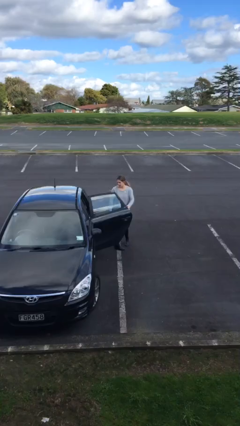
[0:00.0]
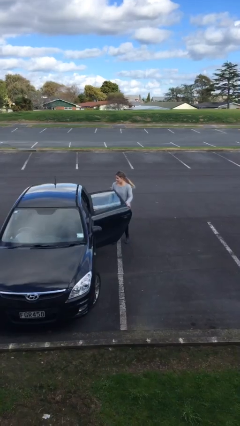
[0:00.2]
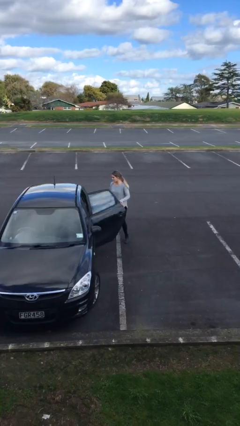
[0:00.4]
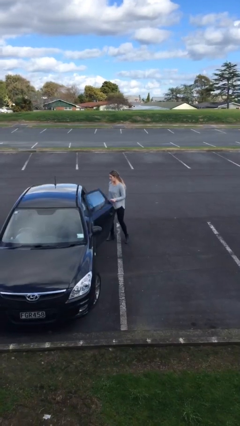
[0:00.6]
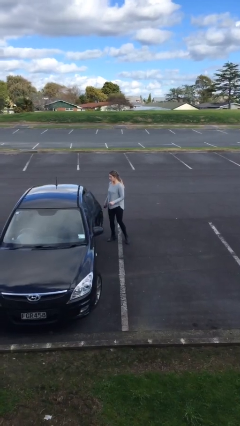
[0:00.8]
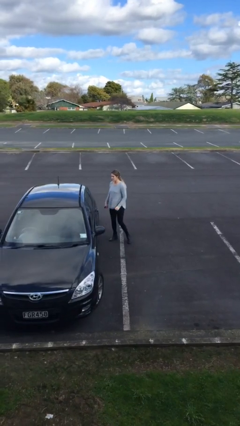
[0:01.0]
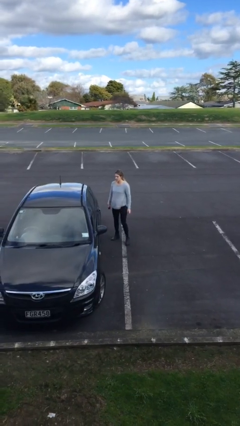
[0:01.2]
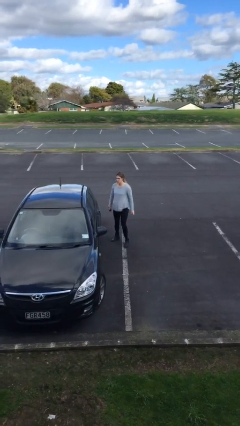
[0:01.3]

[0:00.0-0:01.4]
person closes car door

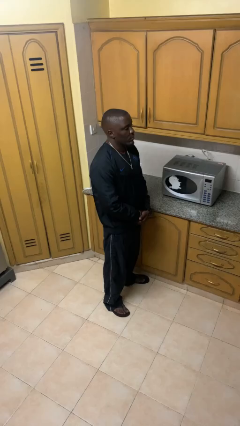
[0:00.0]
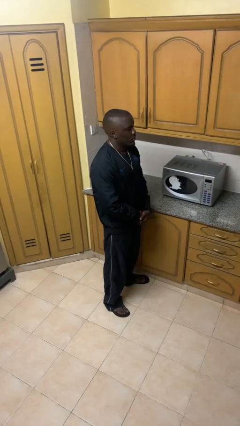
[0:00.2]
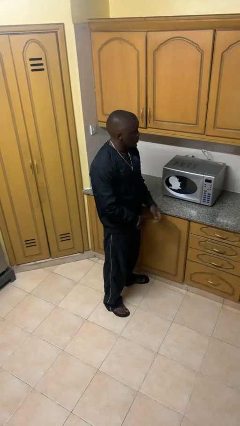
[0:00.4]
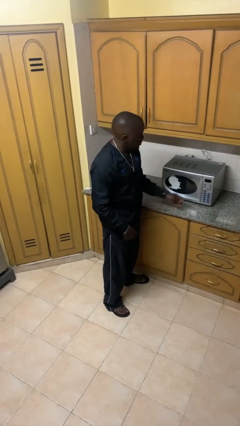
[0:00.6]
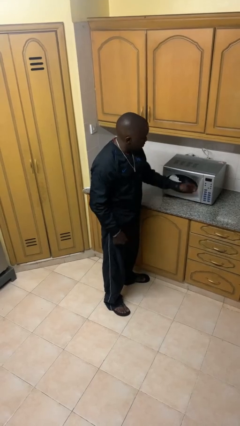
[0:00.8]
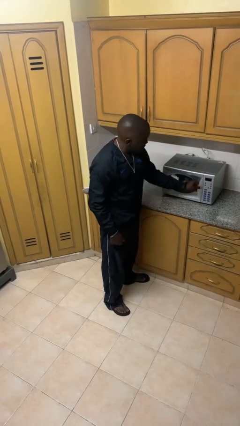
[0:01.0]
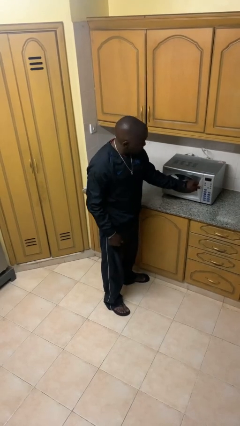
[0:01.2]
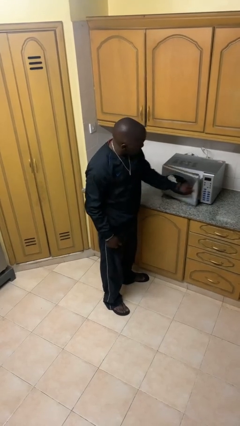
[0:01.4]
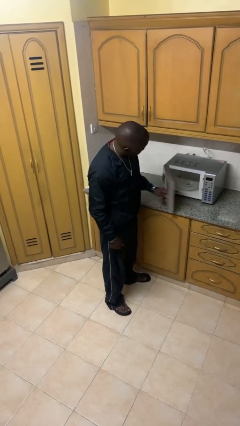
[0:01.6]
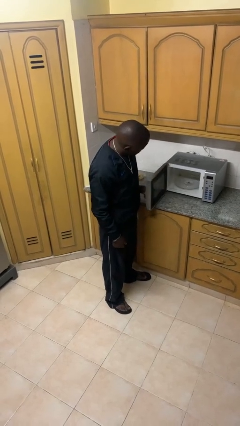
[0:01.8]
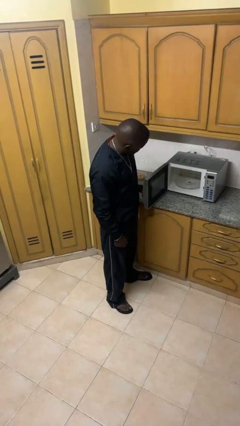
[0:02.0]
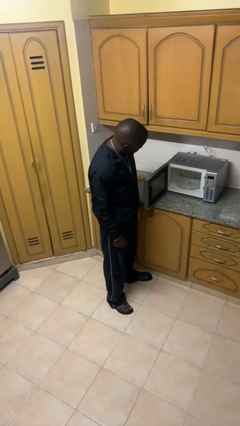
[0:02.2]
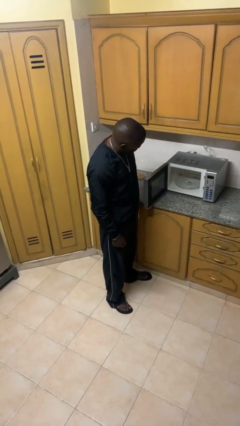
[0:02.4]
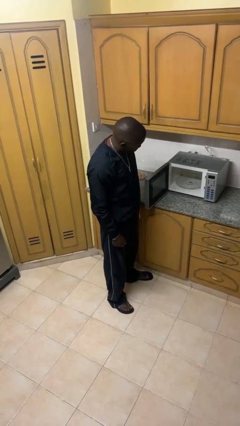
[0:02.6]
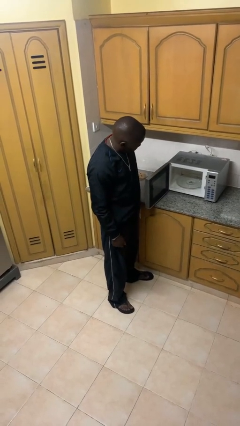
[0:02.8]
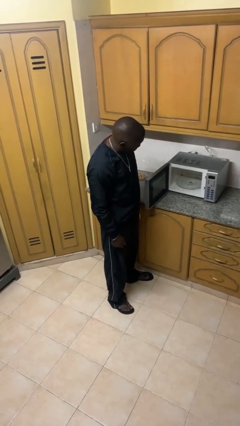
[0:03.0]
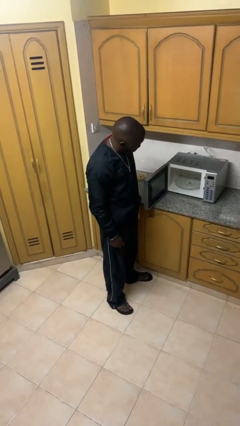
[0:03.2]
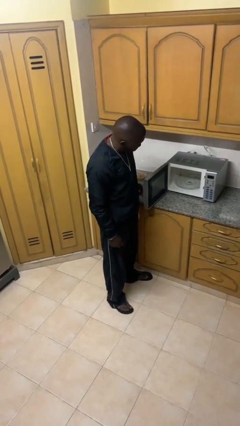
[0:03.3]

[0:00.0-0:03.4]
person opens microwave

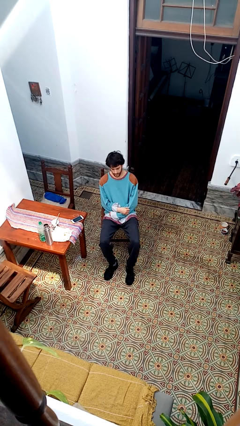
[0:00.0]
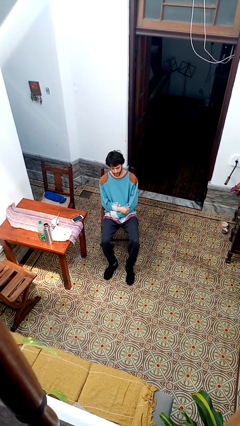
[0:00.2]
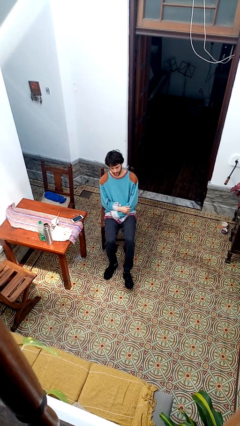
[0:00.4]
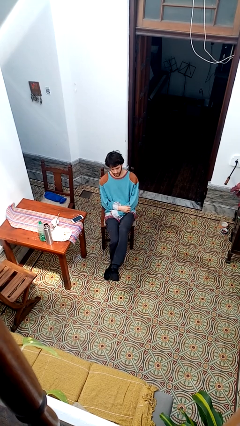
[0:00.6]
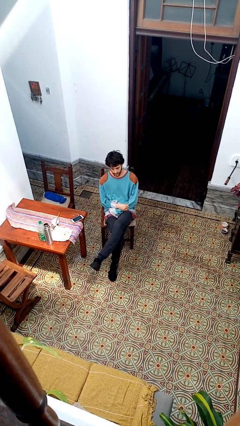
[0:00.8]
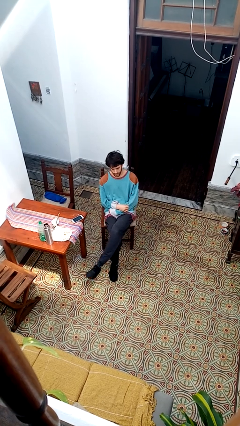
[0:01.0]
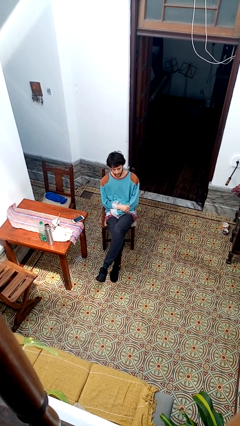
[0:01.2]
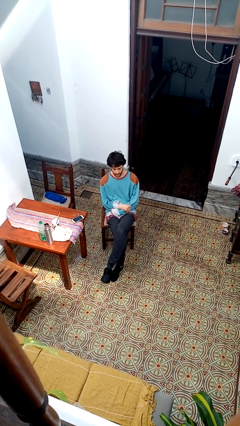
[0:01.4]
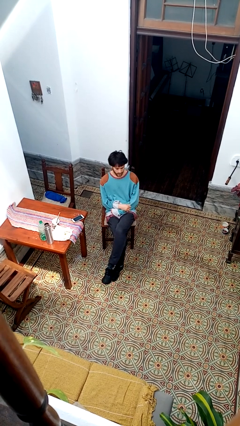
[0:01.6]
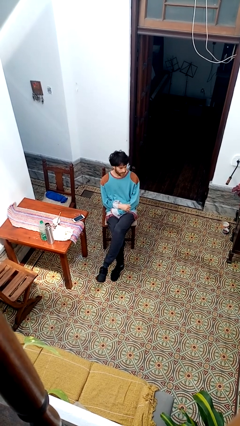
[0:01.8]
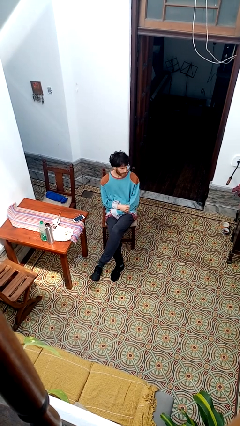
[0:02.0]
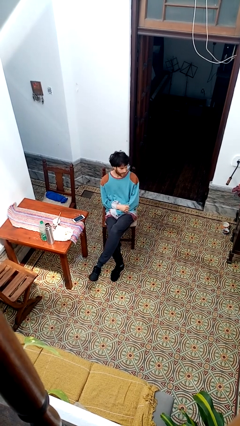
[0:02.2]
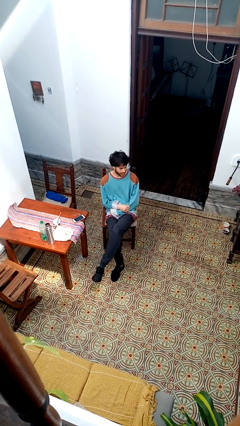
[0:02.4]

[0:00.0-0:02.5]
person crosses legs

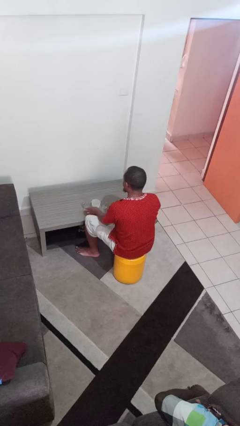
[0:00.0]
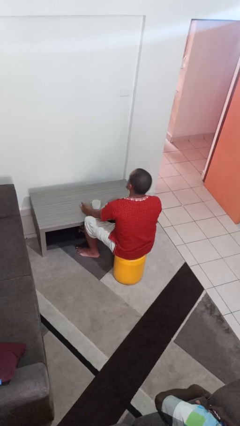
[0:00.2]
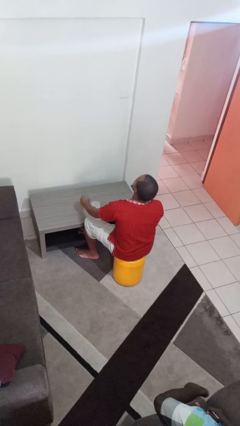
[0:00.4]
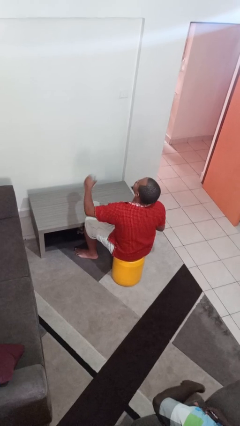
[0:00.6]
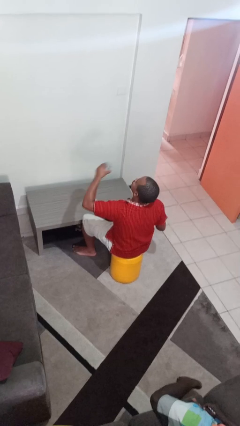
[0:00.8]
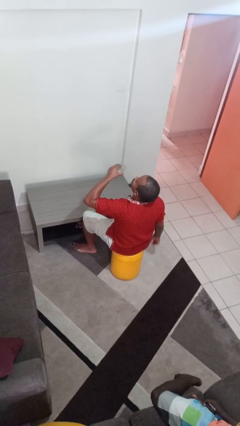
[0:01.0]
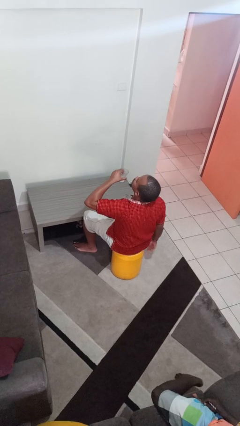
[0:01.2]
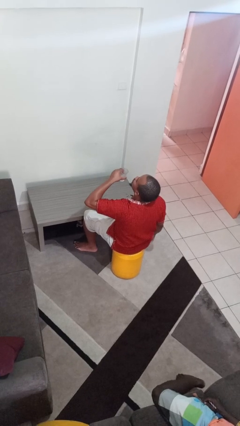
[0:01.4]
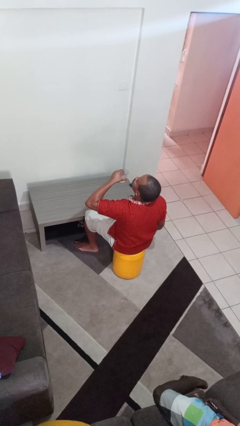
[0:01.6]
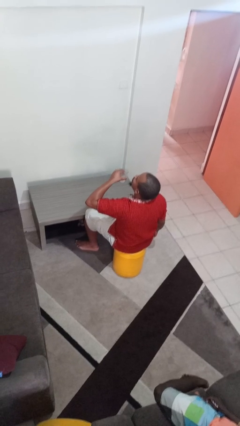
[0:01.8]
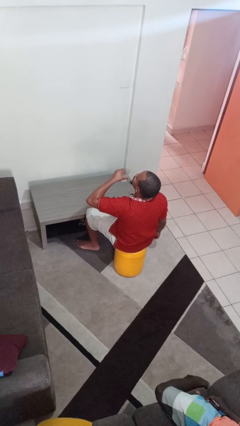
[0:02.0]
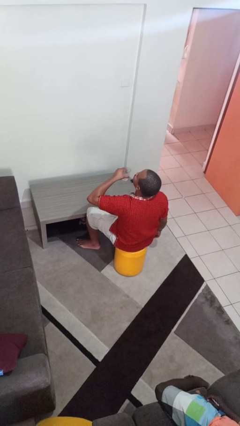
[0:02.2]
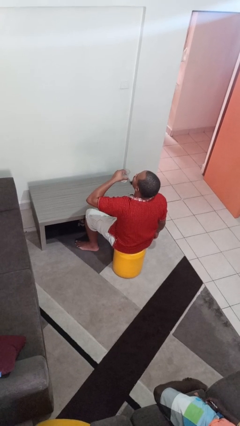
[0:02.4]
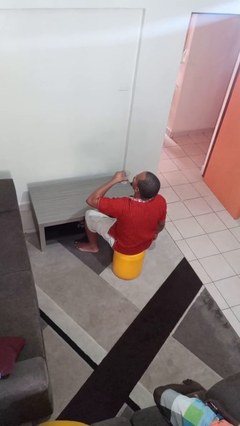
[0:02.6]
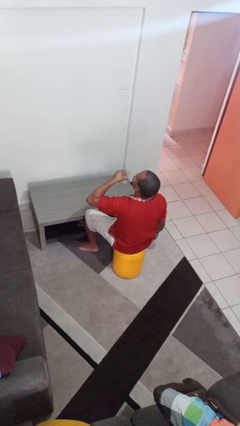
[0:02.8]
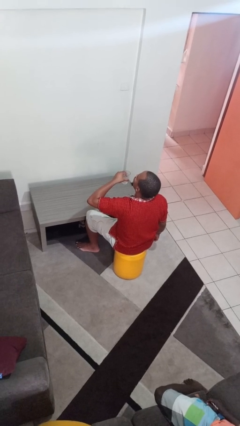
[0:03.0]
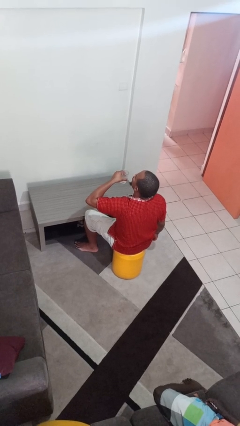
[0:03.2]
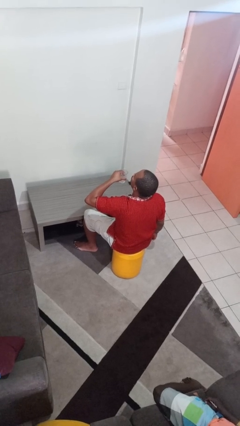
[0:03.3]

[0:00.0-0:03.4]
person picks up object from table

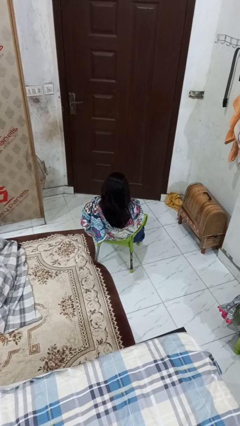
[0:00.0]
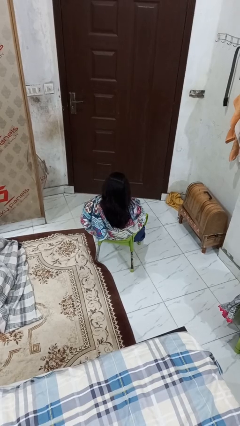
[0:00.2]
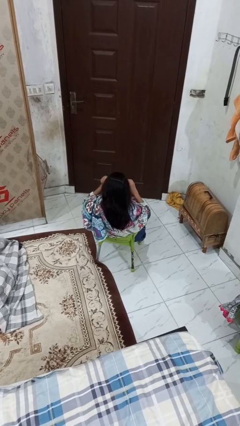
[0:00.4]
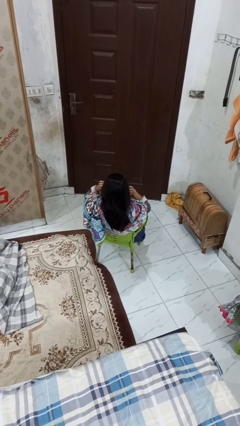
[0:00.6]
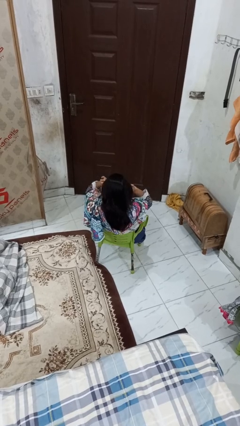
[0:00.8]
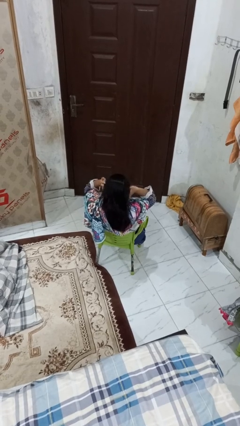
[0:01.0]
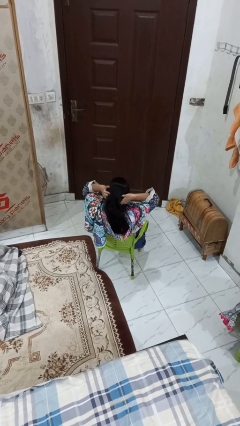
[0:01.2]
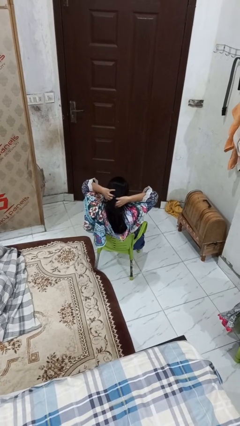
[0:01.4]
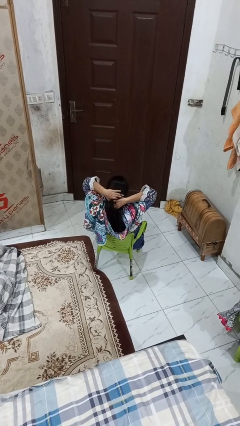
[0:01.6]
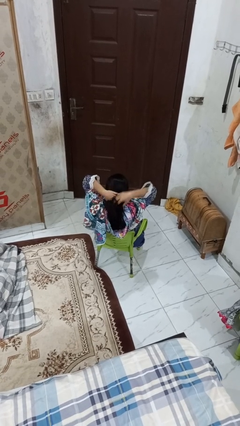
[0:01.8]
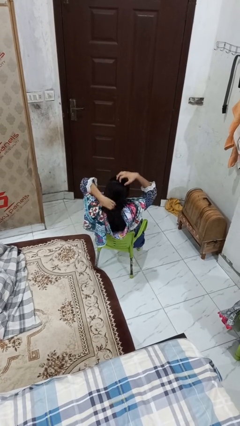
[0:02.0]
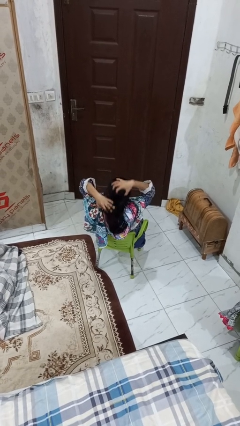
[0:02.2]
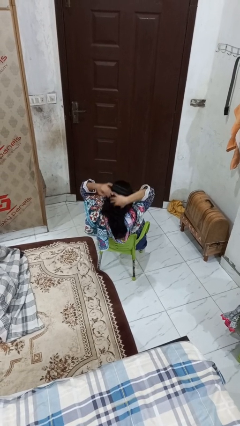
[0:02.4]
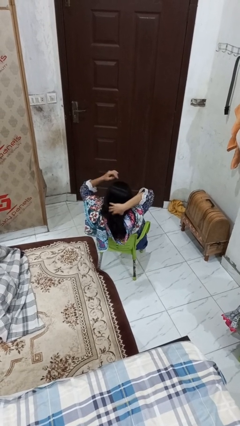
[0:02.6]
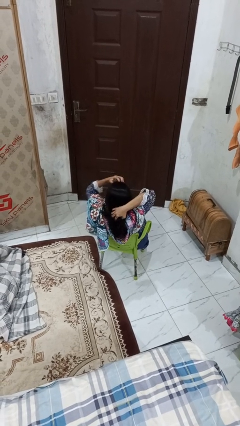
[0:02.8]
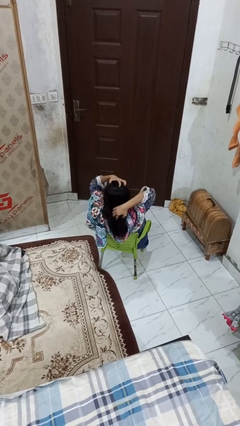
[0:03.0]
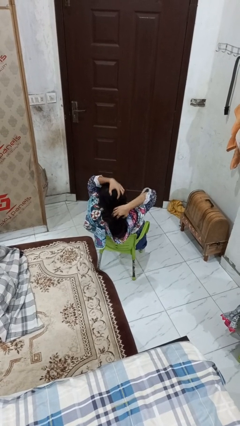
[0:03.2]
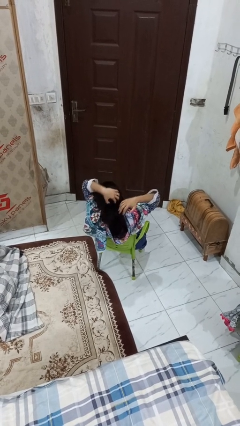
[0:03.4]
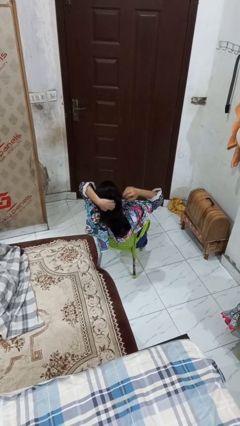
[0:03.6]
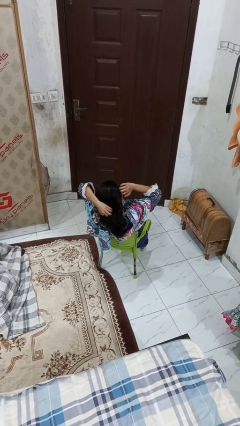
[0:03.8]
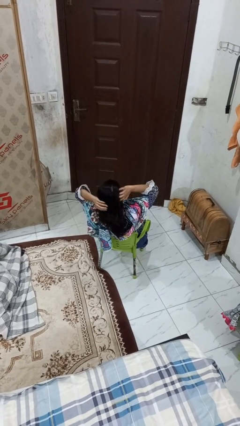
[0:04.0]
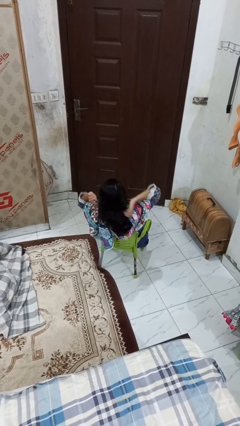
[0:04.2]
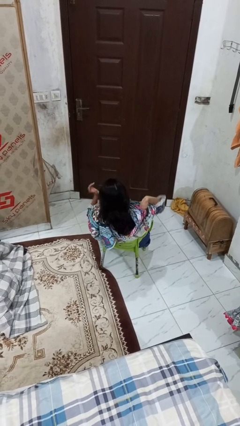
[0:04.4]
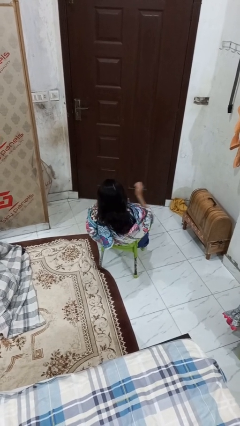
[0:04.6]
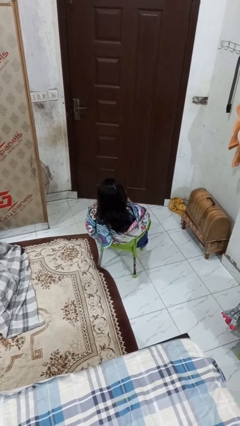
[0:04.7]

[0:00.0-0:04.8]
person strokes hair

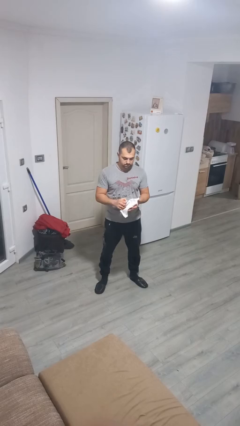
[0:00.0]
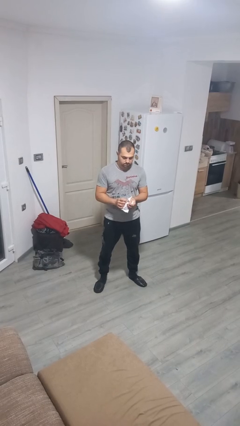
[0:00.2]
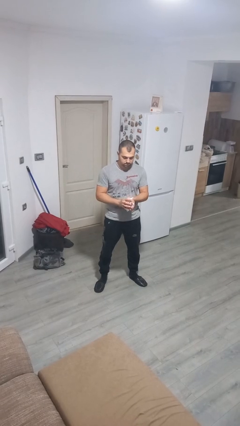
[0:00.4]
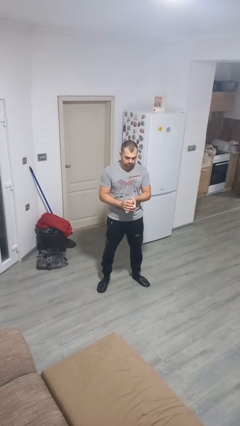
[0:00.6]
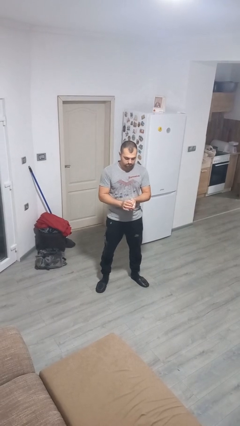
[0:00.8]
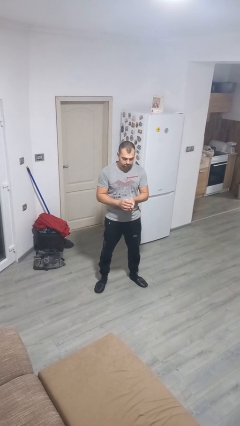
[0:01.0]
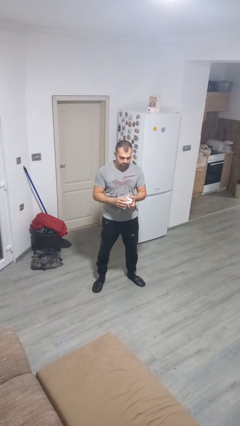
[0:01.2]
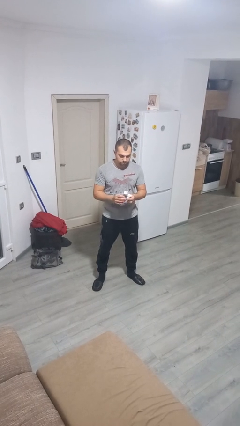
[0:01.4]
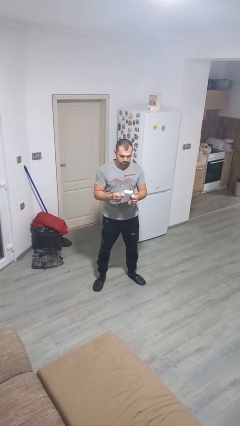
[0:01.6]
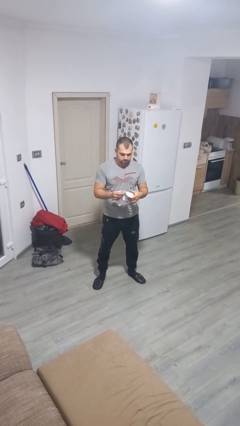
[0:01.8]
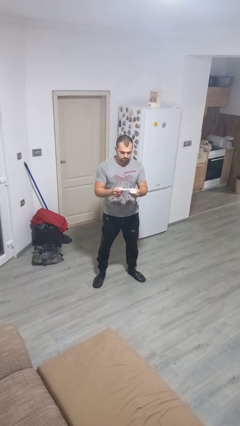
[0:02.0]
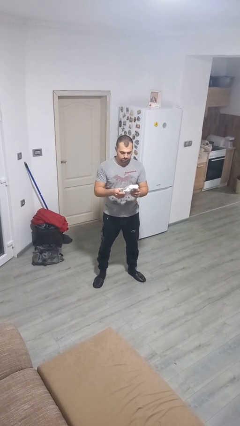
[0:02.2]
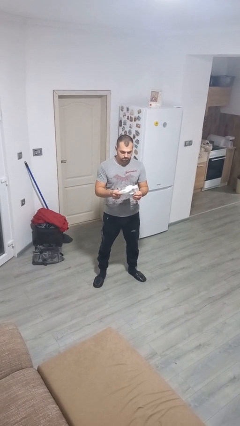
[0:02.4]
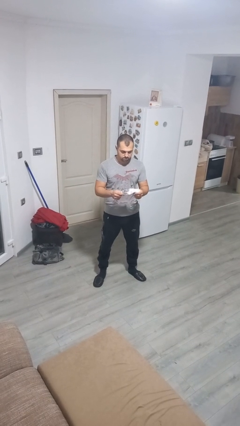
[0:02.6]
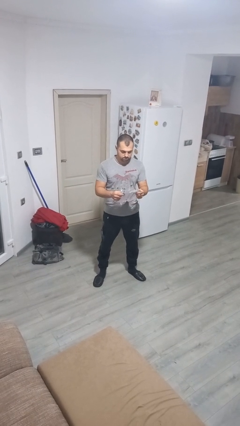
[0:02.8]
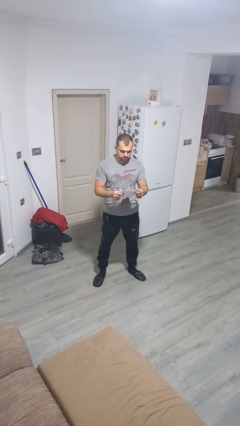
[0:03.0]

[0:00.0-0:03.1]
person crumples paper
